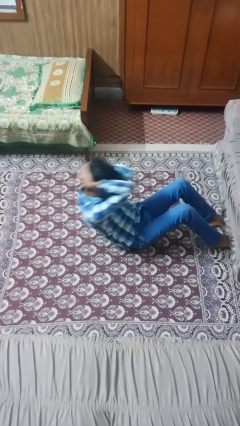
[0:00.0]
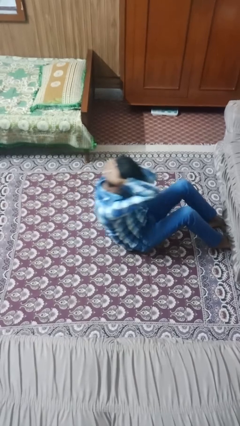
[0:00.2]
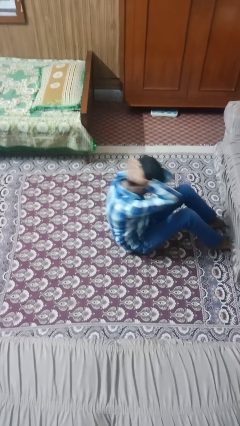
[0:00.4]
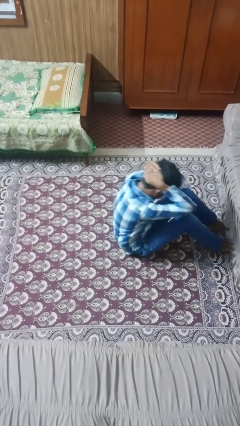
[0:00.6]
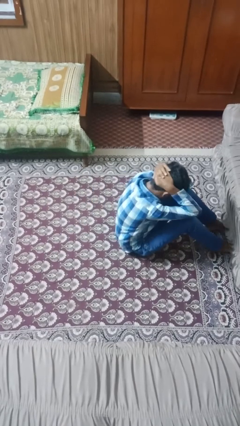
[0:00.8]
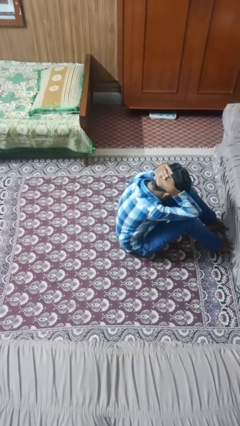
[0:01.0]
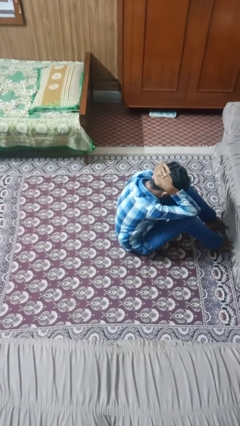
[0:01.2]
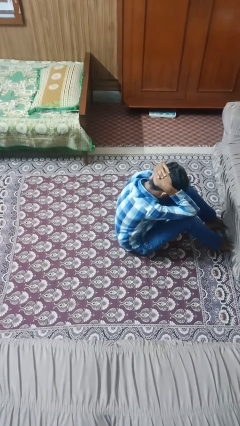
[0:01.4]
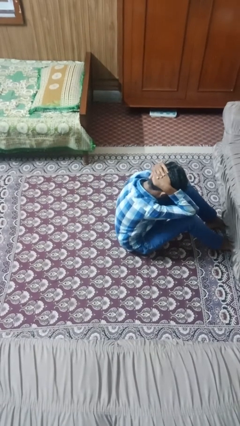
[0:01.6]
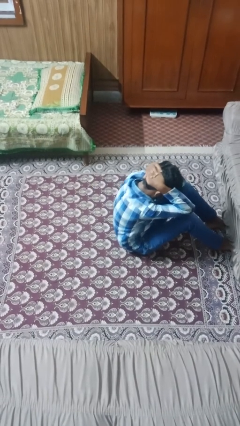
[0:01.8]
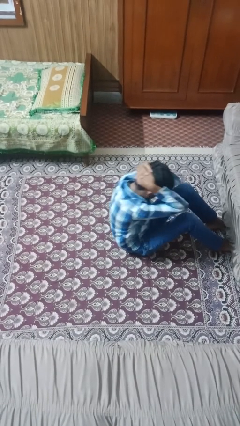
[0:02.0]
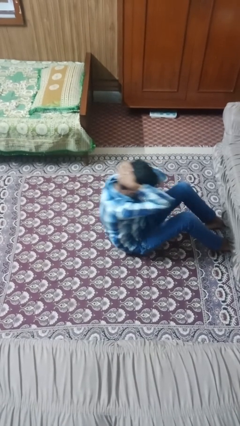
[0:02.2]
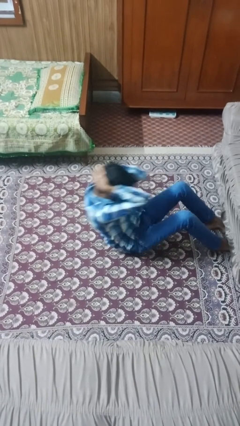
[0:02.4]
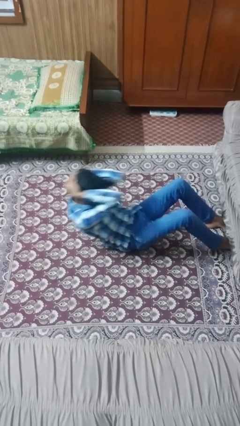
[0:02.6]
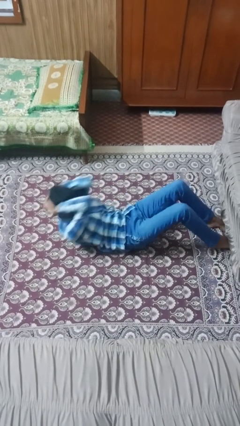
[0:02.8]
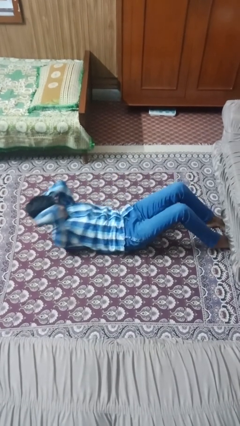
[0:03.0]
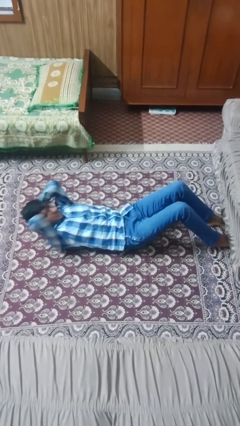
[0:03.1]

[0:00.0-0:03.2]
person exercises with situp

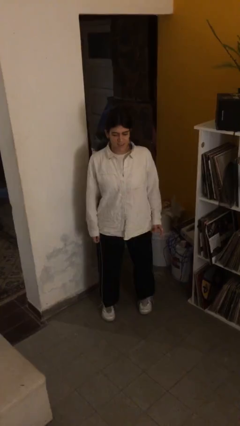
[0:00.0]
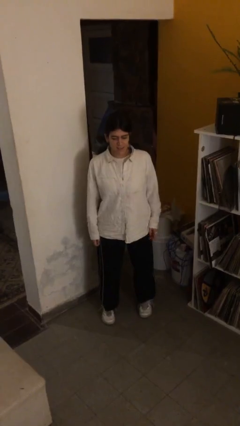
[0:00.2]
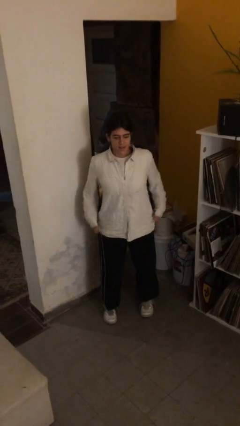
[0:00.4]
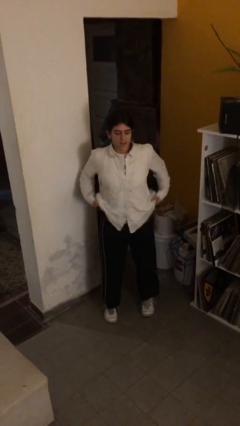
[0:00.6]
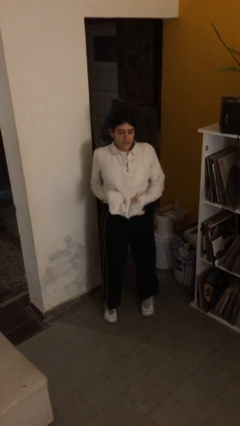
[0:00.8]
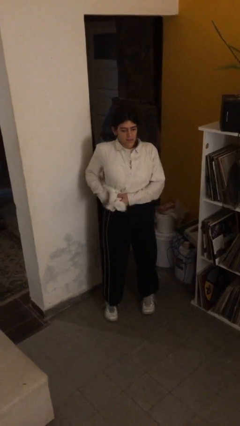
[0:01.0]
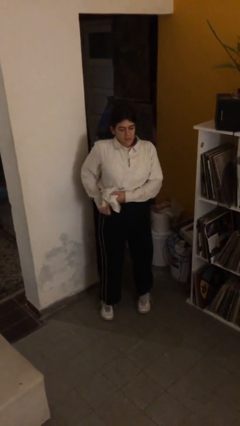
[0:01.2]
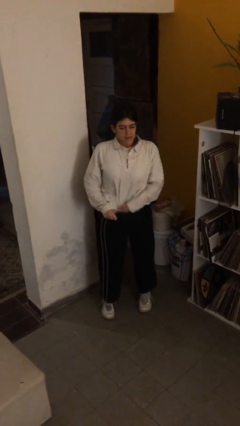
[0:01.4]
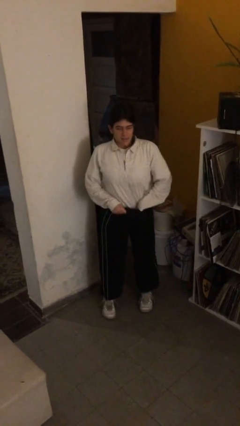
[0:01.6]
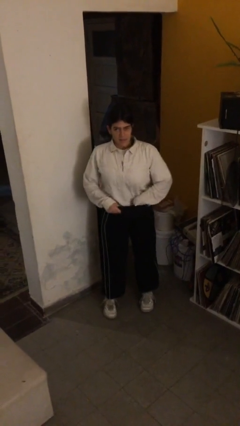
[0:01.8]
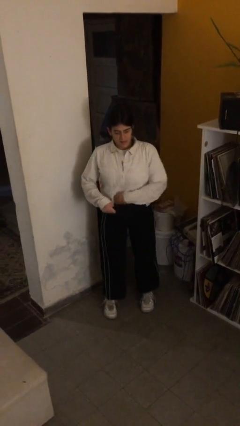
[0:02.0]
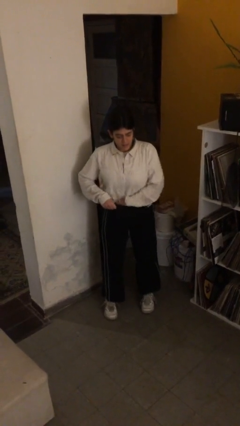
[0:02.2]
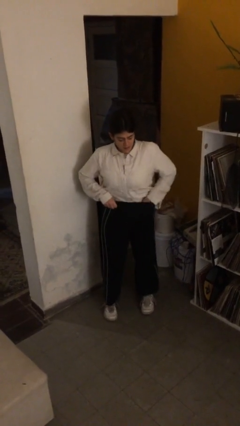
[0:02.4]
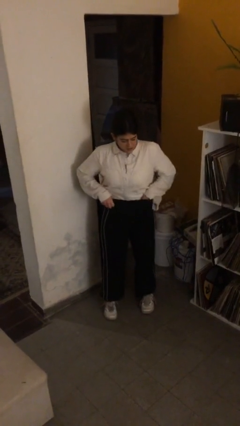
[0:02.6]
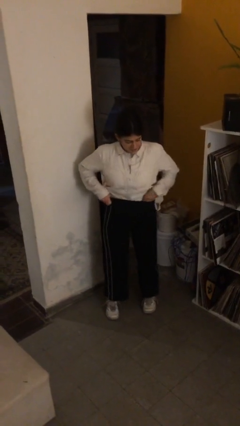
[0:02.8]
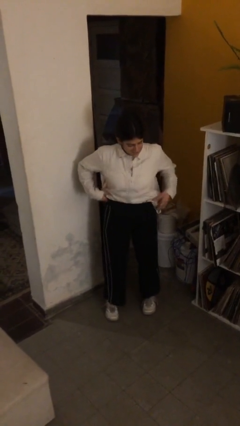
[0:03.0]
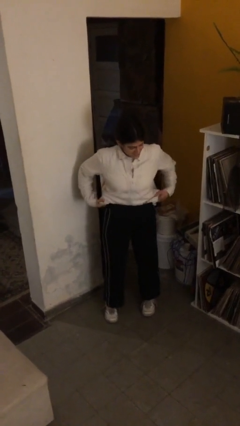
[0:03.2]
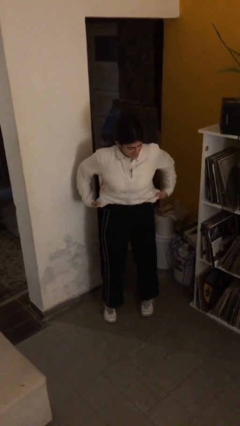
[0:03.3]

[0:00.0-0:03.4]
person tucks in shirt

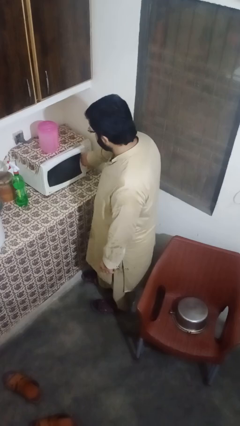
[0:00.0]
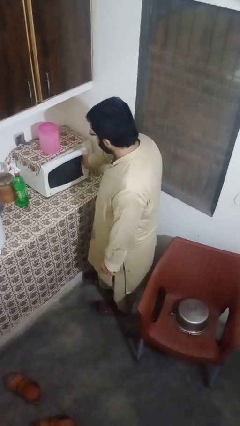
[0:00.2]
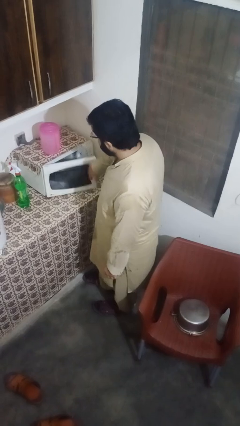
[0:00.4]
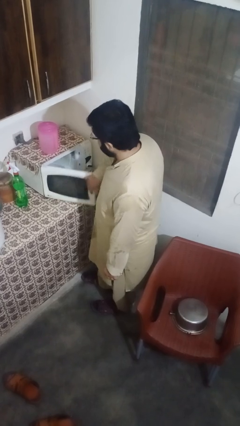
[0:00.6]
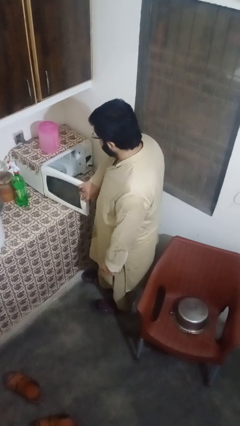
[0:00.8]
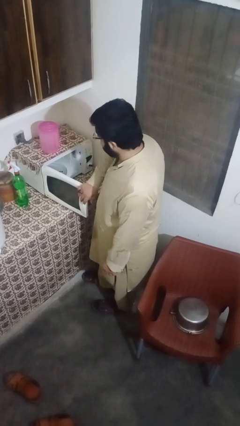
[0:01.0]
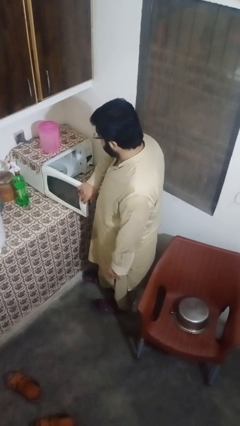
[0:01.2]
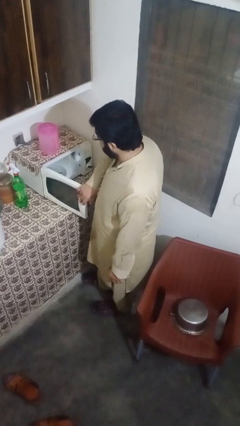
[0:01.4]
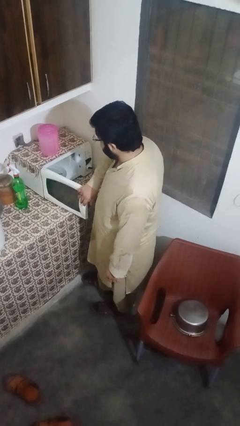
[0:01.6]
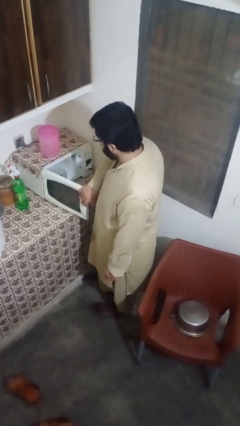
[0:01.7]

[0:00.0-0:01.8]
person opens microwave

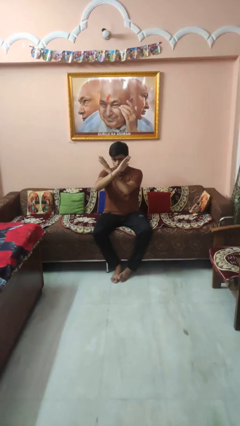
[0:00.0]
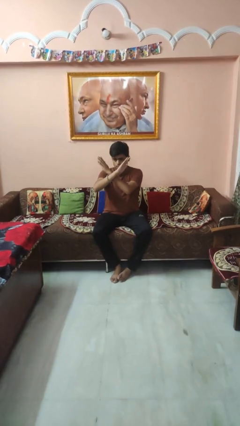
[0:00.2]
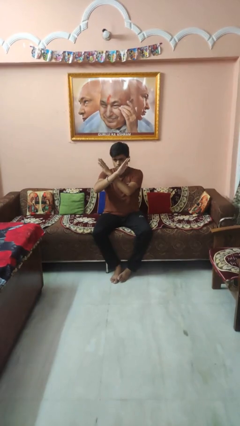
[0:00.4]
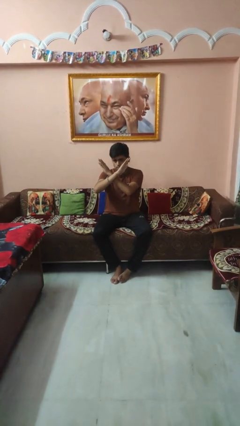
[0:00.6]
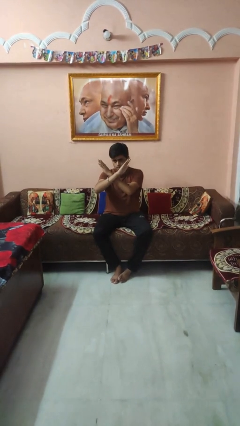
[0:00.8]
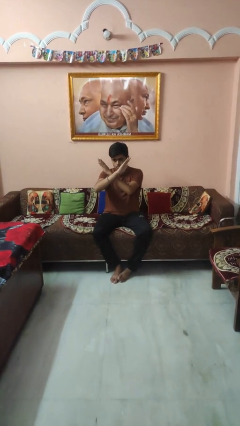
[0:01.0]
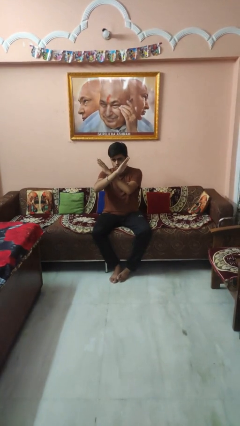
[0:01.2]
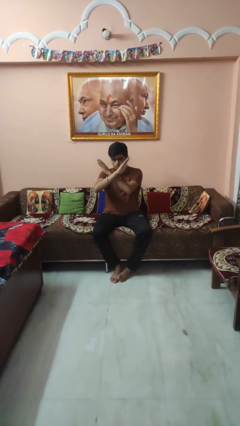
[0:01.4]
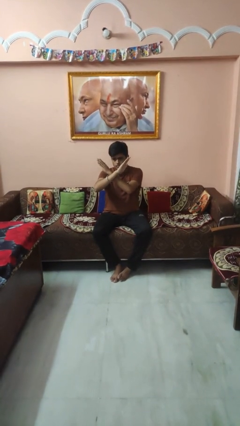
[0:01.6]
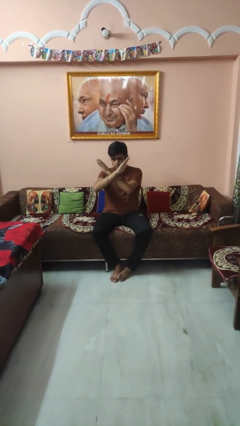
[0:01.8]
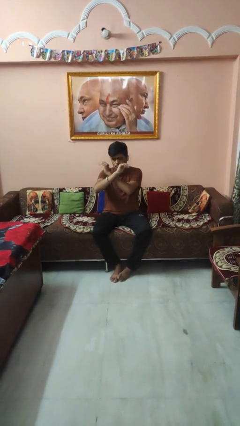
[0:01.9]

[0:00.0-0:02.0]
person gestures arms x

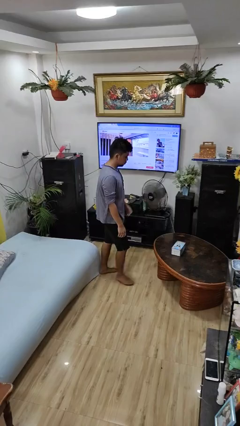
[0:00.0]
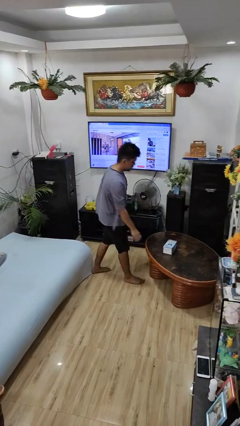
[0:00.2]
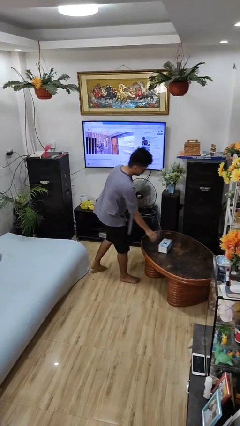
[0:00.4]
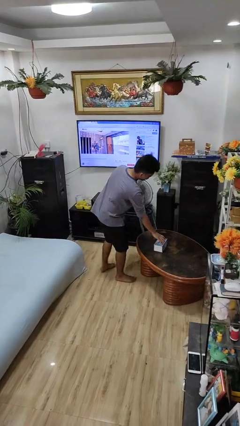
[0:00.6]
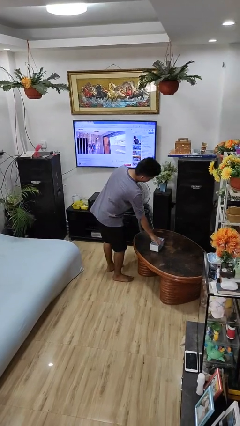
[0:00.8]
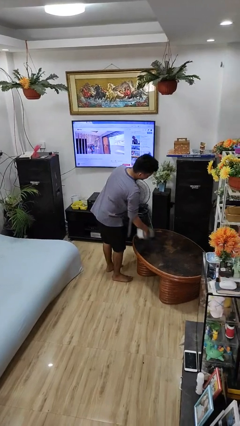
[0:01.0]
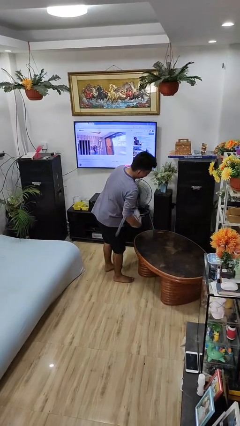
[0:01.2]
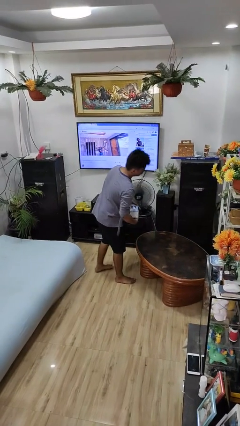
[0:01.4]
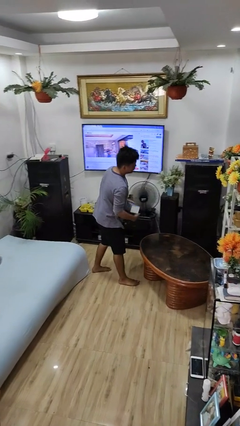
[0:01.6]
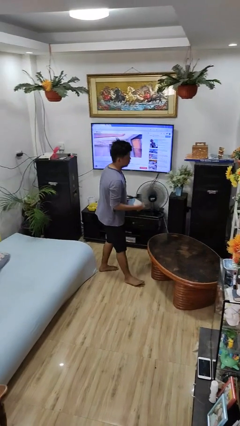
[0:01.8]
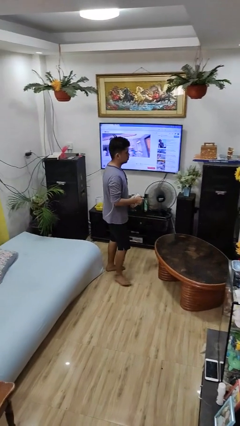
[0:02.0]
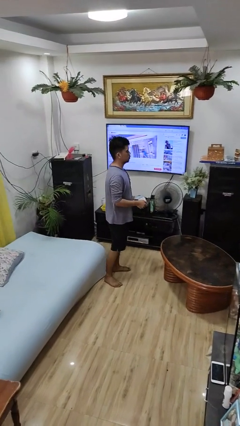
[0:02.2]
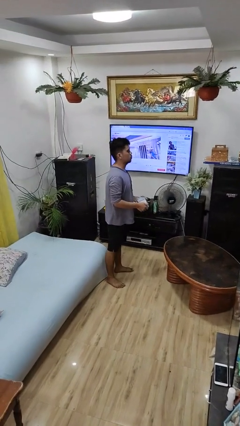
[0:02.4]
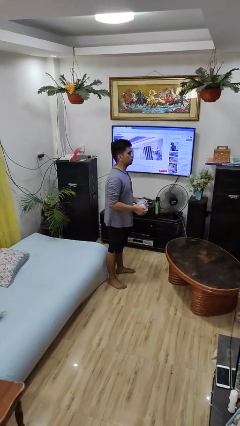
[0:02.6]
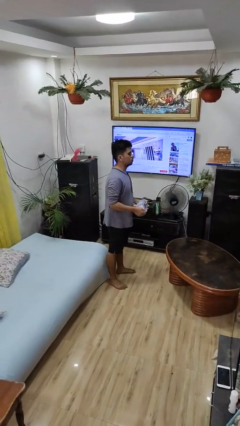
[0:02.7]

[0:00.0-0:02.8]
person picks up object from table

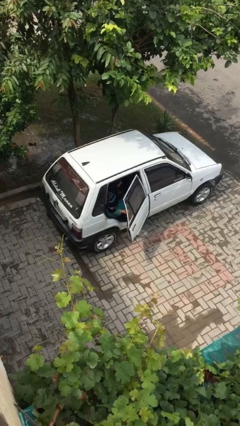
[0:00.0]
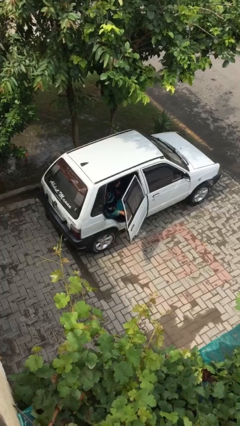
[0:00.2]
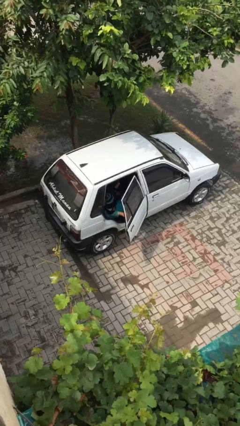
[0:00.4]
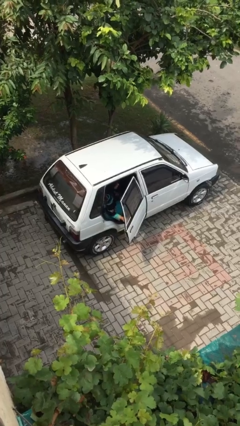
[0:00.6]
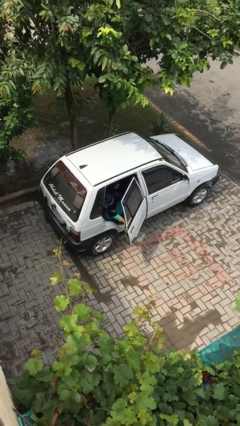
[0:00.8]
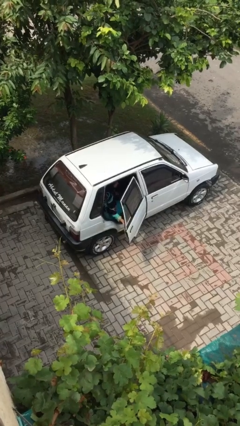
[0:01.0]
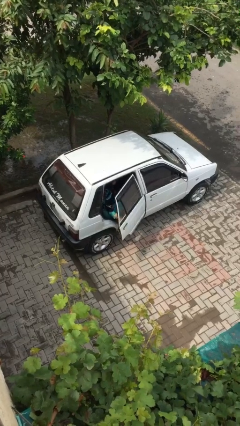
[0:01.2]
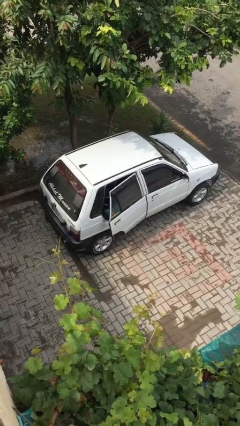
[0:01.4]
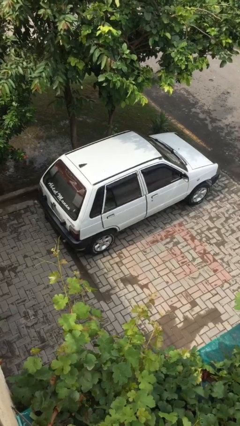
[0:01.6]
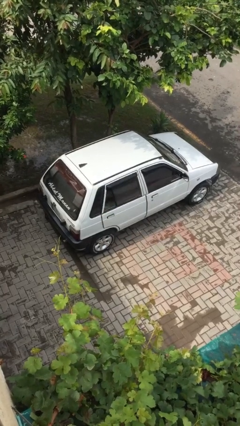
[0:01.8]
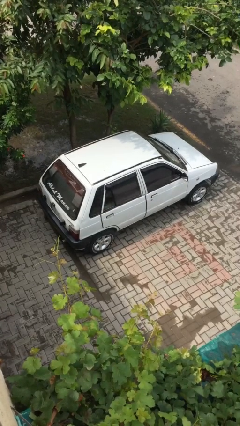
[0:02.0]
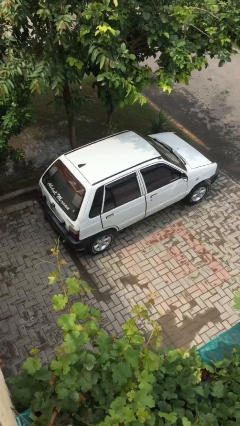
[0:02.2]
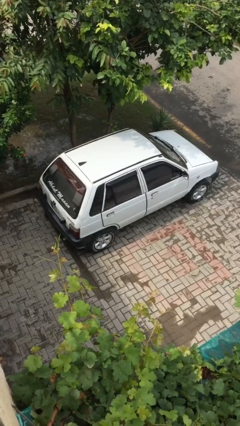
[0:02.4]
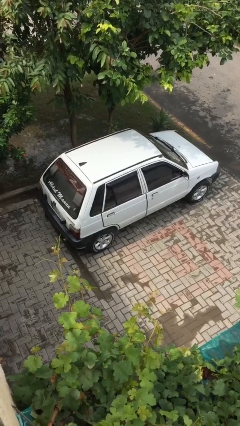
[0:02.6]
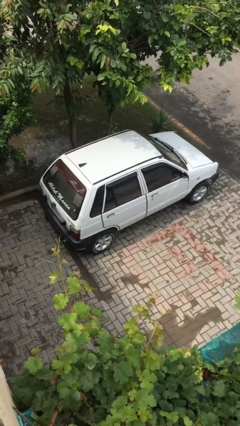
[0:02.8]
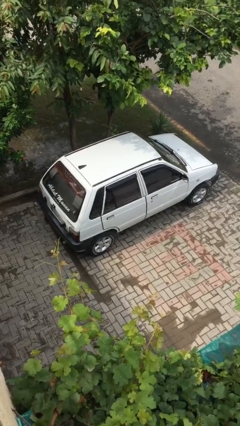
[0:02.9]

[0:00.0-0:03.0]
person closes car door

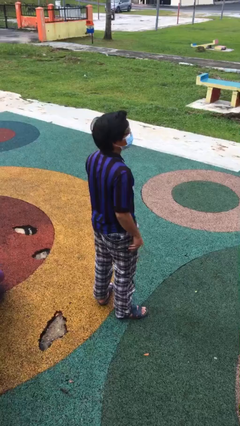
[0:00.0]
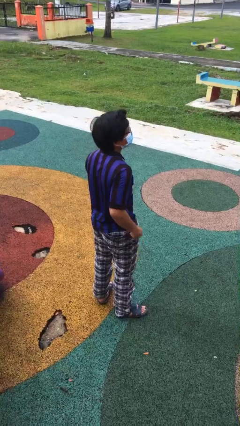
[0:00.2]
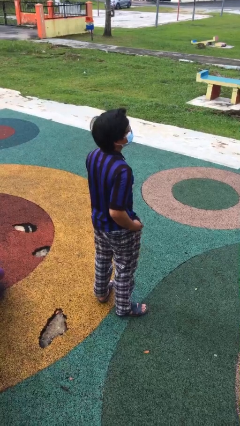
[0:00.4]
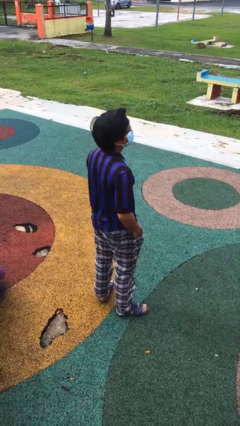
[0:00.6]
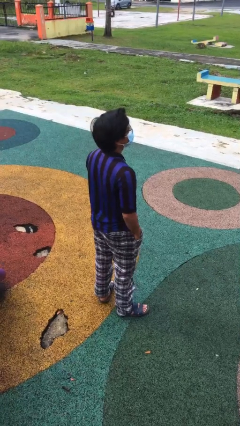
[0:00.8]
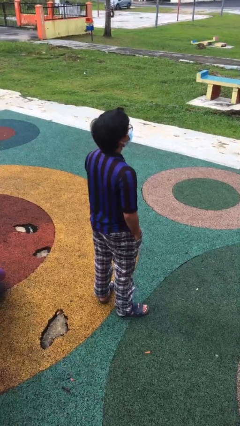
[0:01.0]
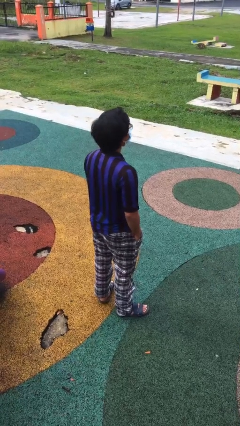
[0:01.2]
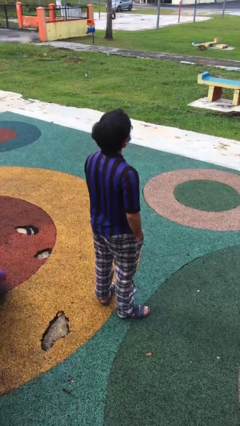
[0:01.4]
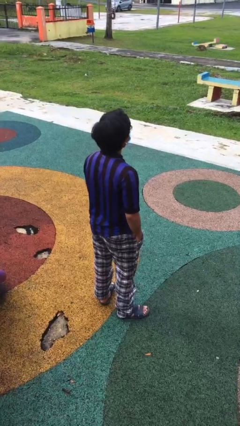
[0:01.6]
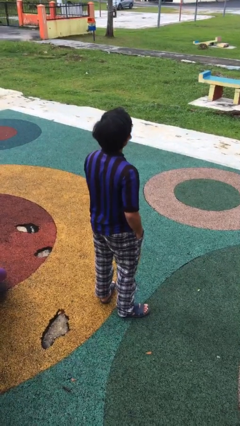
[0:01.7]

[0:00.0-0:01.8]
person puts hands in back pockets
